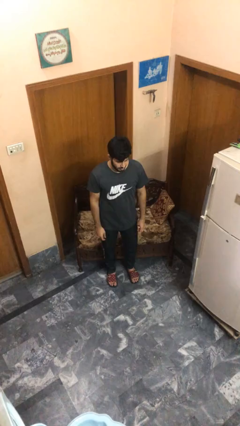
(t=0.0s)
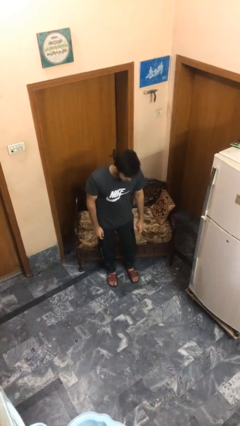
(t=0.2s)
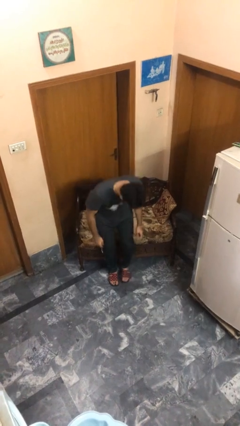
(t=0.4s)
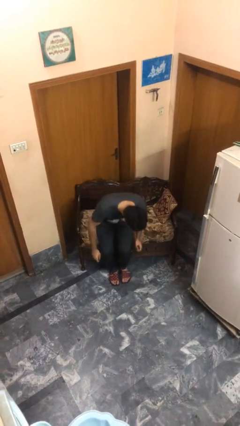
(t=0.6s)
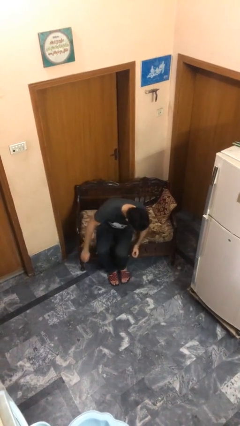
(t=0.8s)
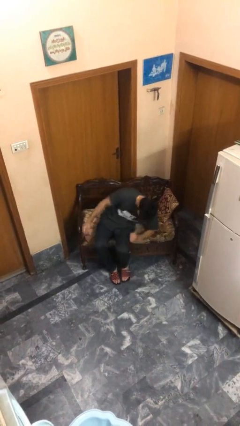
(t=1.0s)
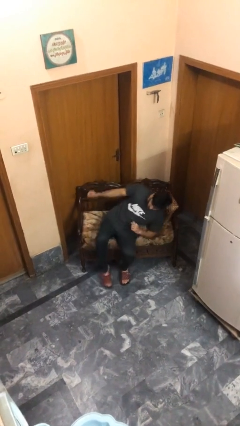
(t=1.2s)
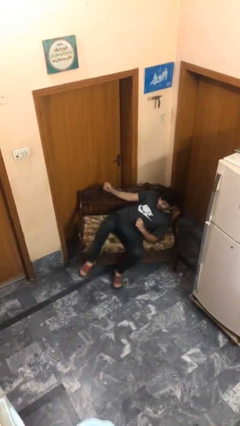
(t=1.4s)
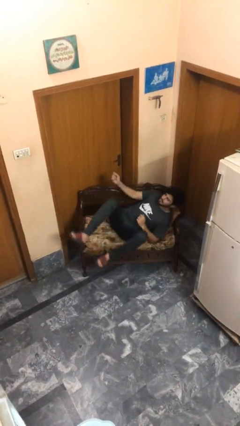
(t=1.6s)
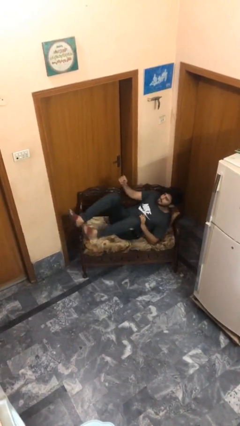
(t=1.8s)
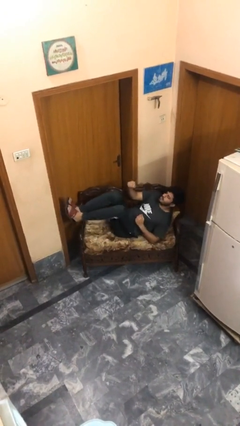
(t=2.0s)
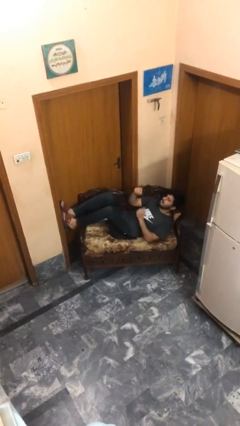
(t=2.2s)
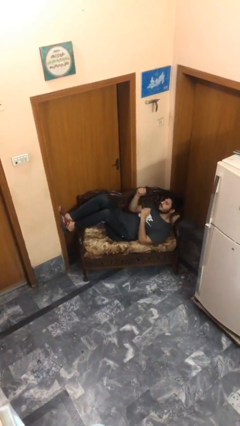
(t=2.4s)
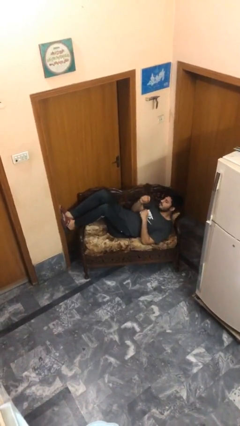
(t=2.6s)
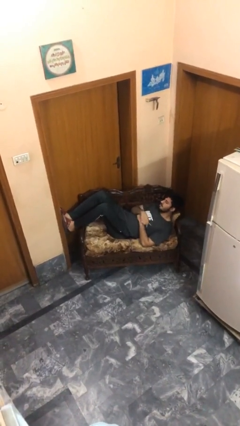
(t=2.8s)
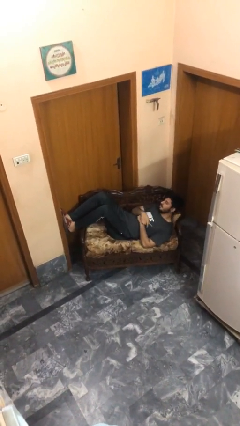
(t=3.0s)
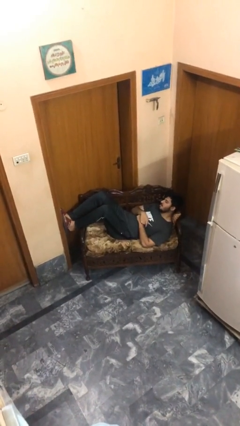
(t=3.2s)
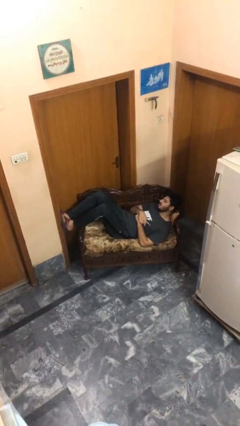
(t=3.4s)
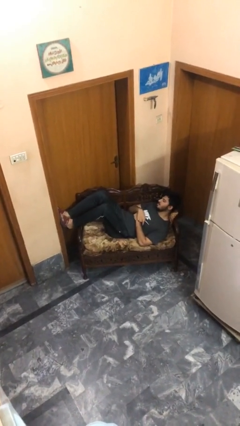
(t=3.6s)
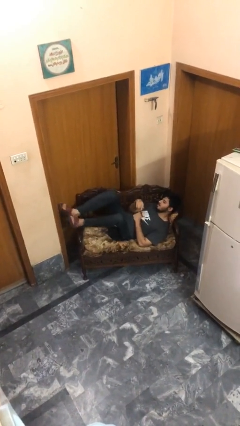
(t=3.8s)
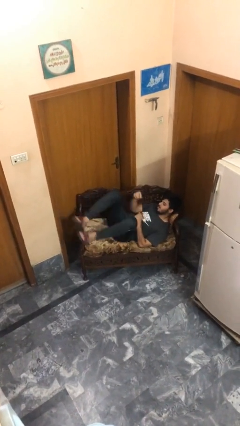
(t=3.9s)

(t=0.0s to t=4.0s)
person lies down on couch

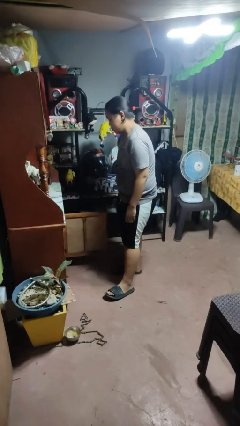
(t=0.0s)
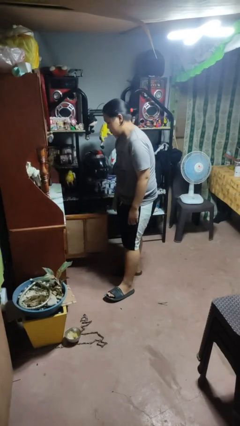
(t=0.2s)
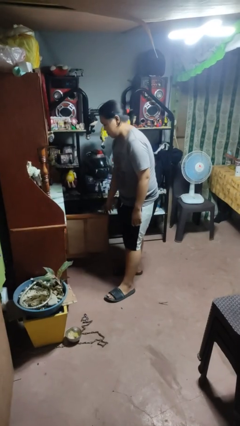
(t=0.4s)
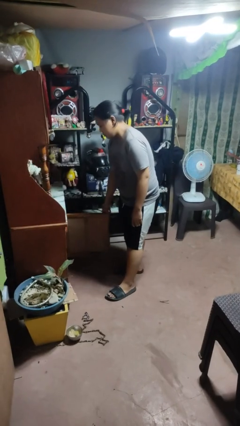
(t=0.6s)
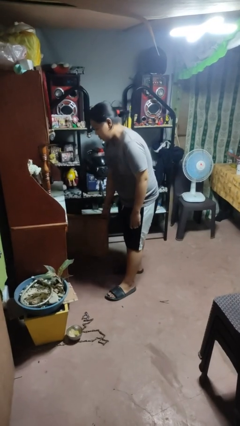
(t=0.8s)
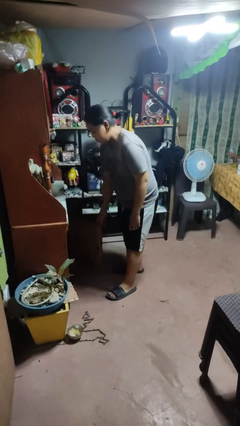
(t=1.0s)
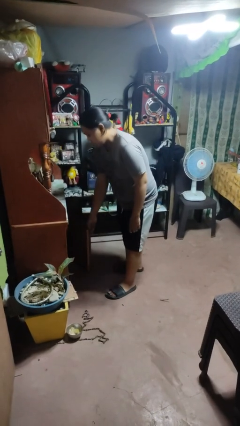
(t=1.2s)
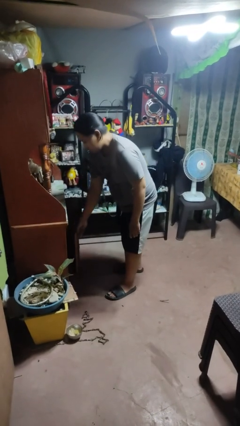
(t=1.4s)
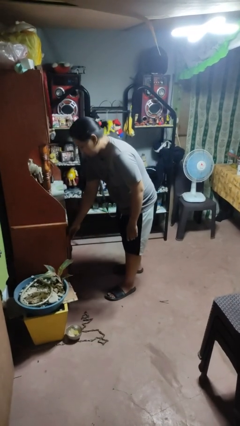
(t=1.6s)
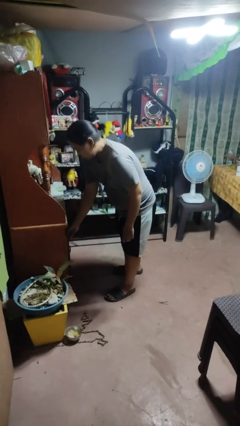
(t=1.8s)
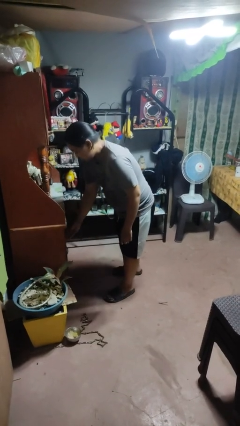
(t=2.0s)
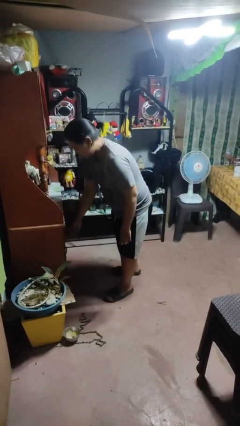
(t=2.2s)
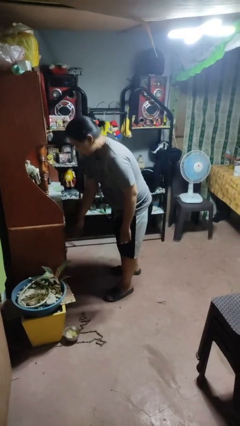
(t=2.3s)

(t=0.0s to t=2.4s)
person closes cabinet

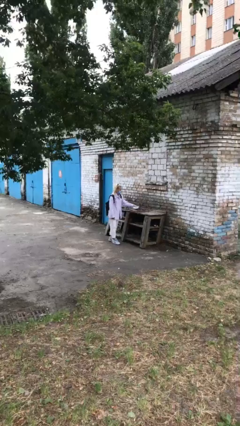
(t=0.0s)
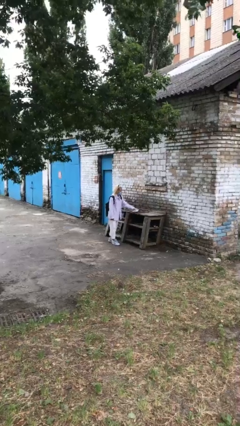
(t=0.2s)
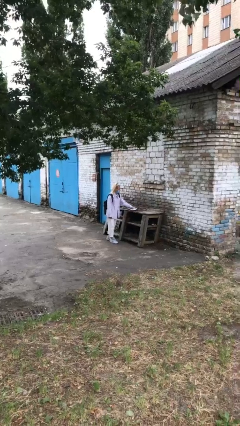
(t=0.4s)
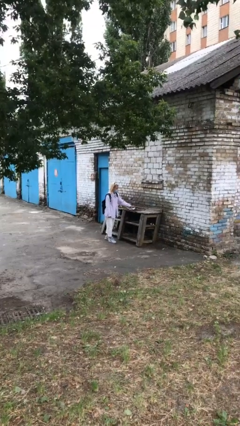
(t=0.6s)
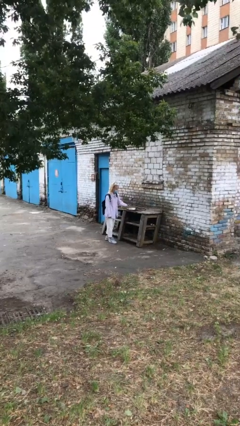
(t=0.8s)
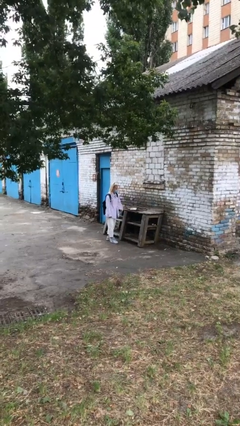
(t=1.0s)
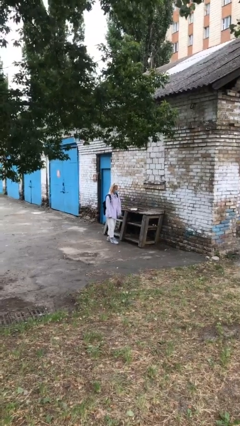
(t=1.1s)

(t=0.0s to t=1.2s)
person puts down object on table

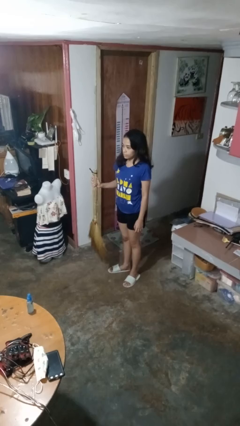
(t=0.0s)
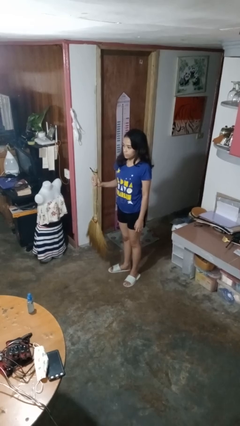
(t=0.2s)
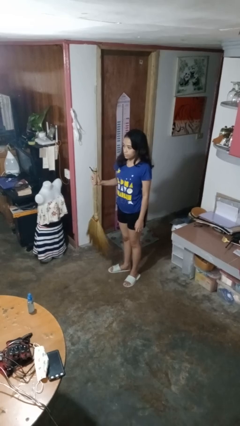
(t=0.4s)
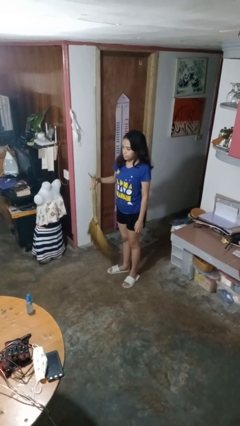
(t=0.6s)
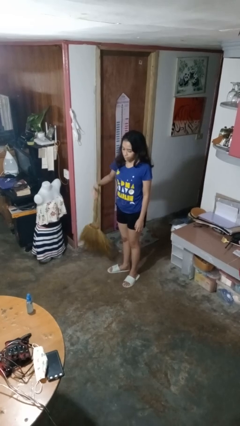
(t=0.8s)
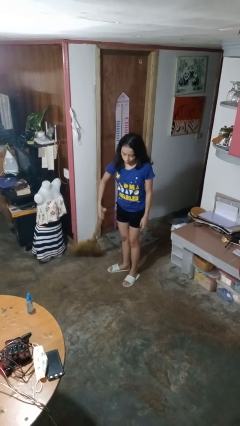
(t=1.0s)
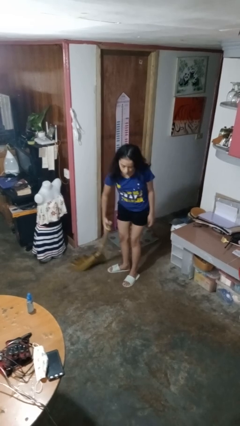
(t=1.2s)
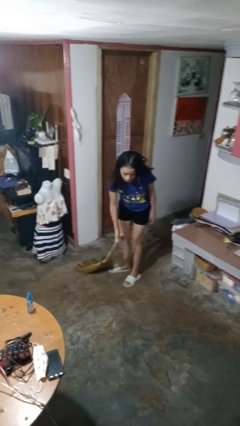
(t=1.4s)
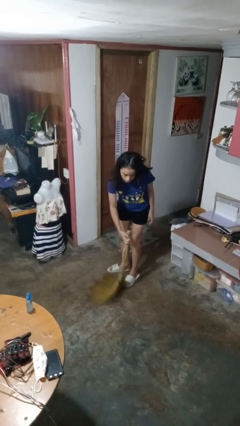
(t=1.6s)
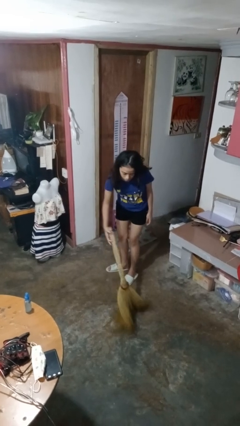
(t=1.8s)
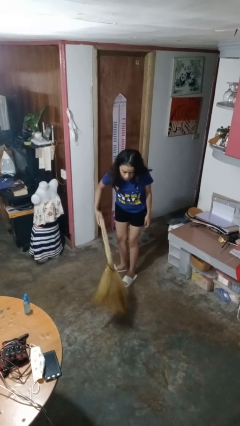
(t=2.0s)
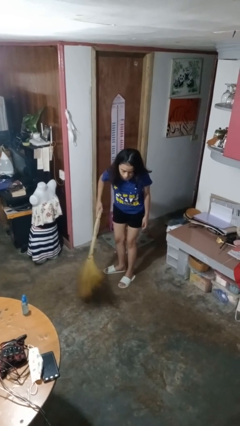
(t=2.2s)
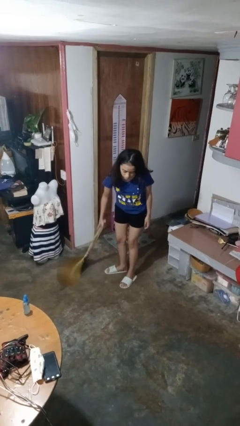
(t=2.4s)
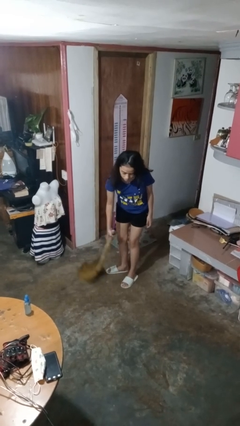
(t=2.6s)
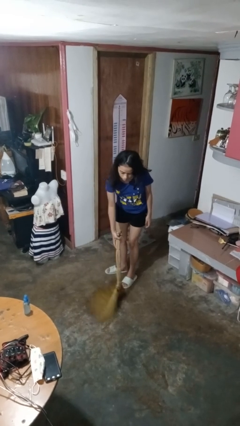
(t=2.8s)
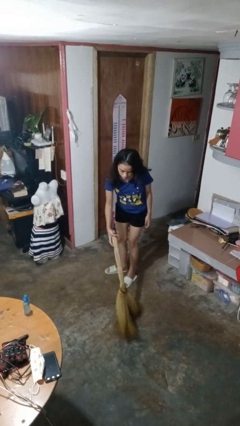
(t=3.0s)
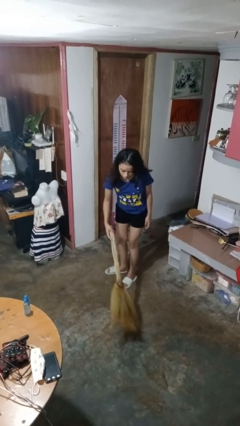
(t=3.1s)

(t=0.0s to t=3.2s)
person sweeps floor

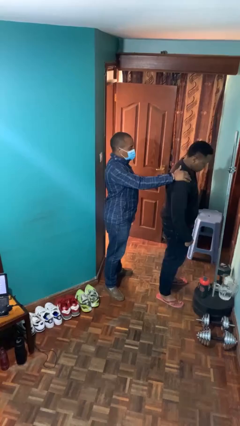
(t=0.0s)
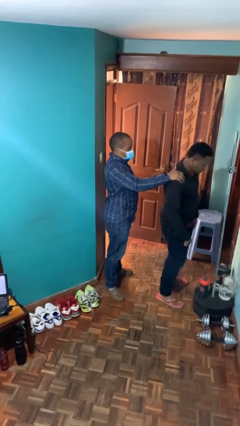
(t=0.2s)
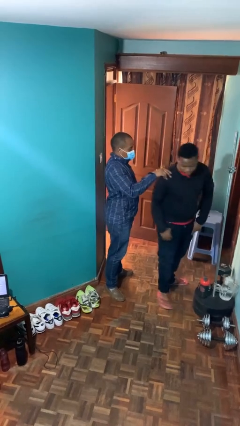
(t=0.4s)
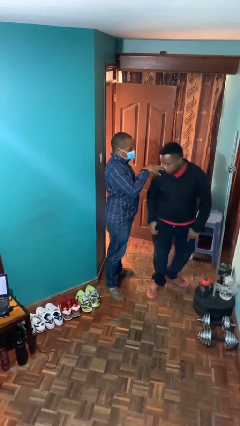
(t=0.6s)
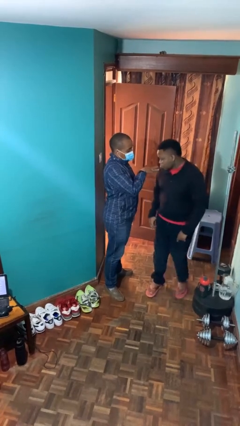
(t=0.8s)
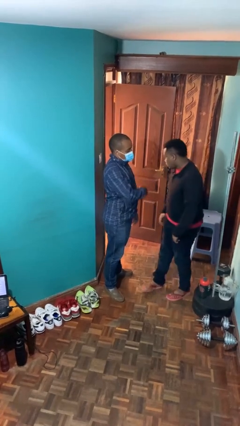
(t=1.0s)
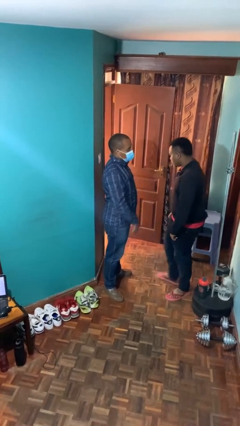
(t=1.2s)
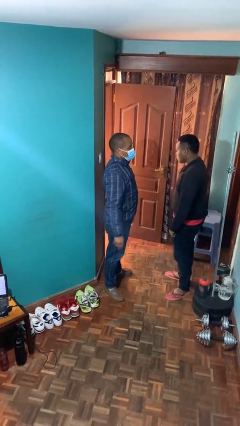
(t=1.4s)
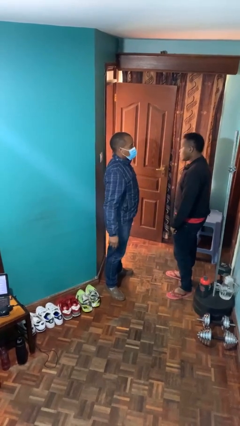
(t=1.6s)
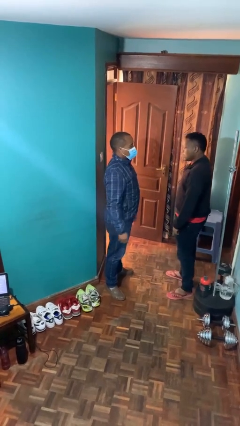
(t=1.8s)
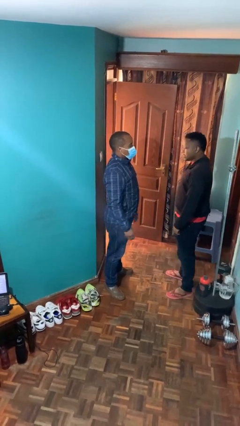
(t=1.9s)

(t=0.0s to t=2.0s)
person spins person around

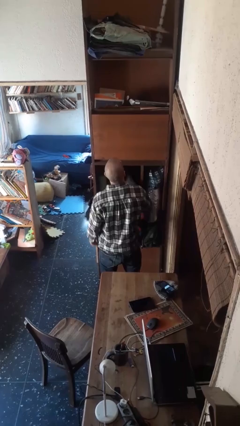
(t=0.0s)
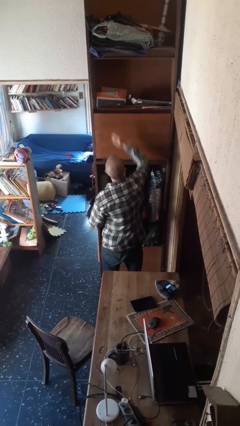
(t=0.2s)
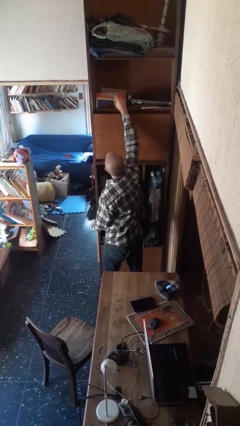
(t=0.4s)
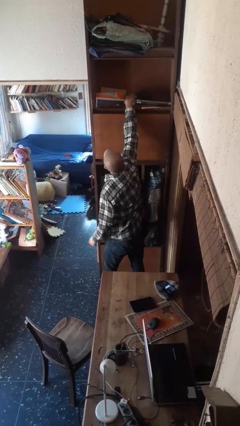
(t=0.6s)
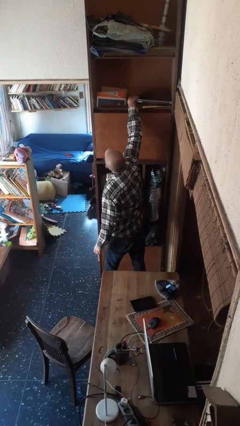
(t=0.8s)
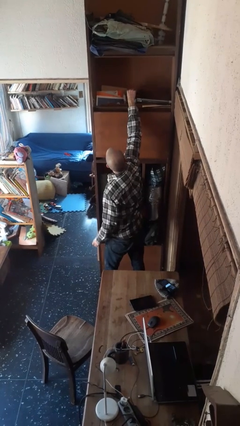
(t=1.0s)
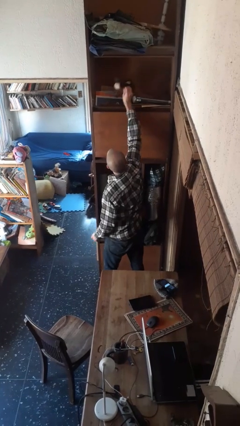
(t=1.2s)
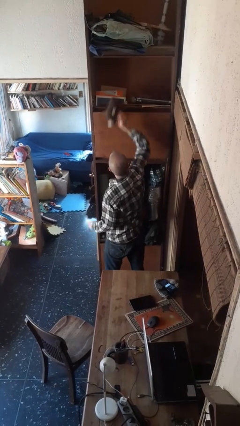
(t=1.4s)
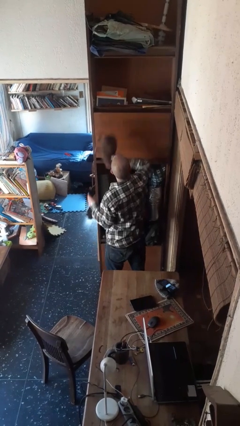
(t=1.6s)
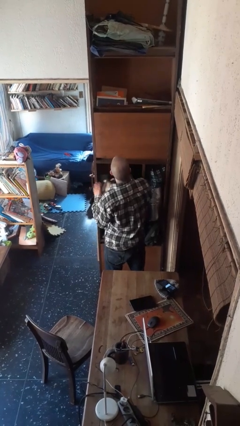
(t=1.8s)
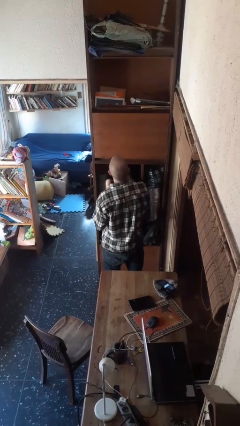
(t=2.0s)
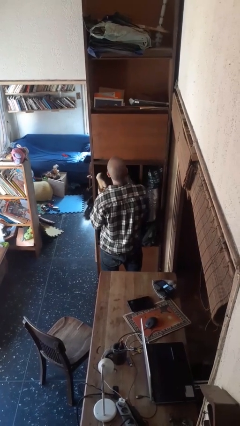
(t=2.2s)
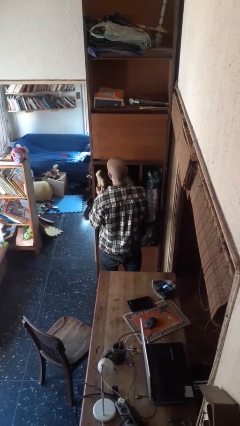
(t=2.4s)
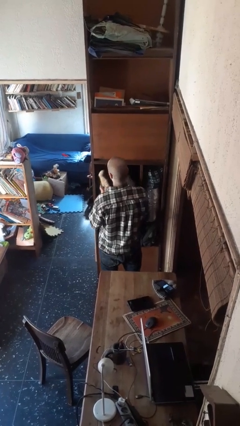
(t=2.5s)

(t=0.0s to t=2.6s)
person picks up object from shelf

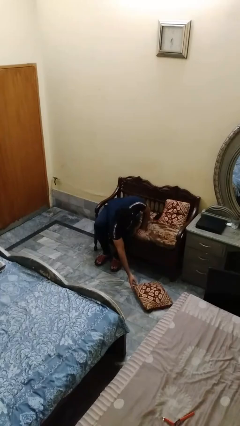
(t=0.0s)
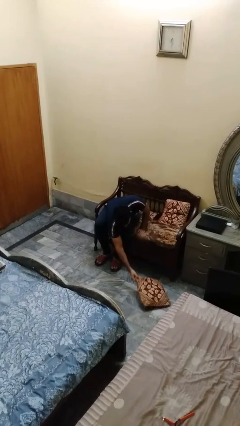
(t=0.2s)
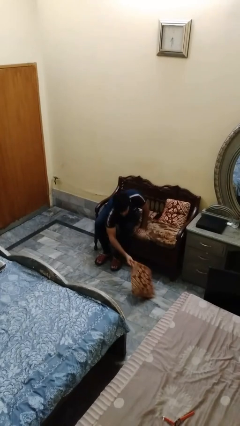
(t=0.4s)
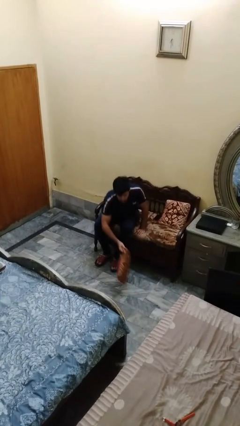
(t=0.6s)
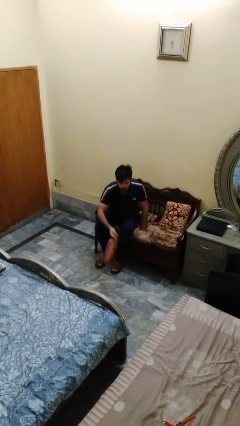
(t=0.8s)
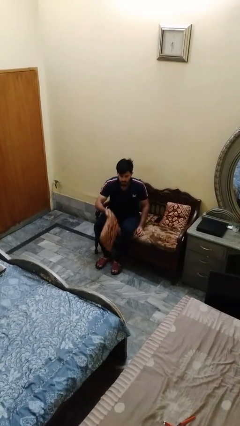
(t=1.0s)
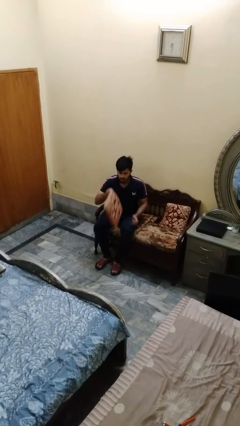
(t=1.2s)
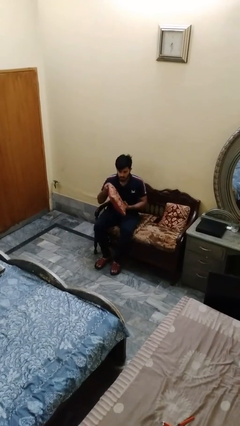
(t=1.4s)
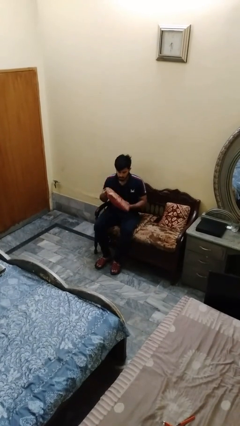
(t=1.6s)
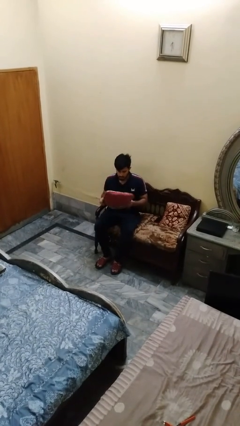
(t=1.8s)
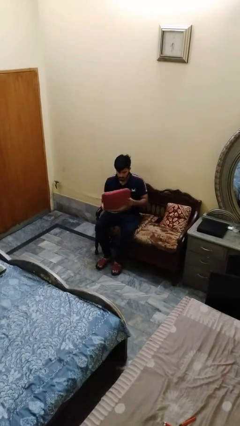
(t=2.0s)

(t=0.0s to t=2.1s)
person picks up object from floor
